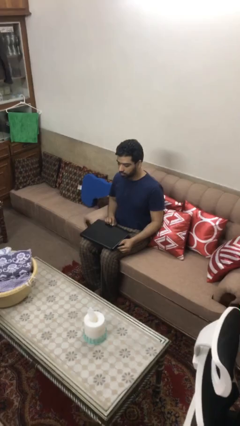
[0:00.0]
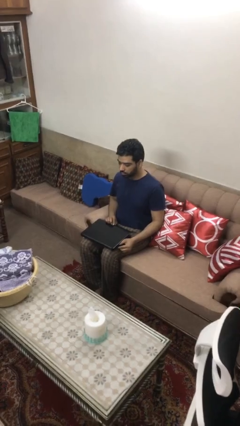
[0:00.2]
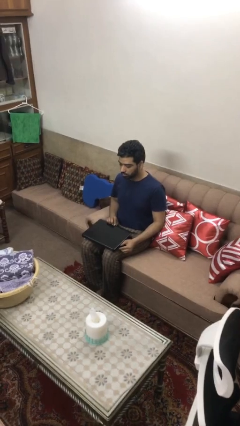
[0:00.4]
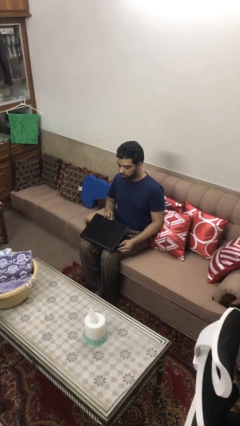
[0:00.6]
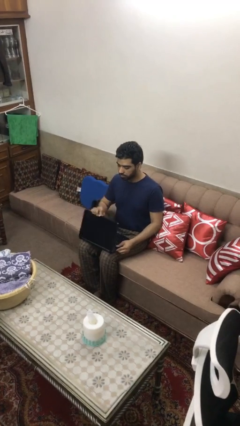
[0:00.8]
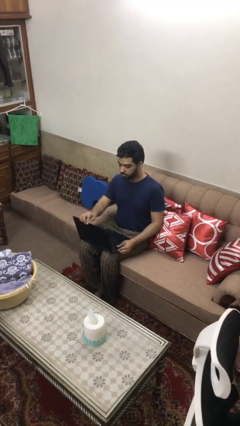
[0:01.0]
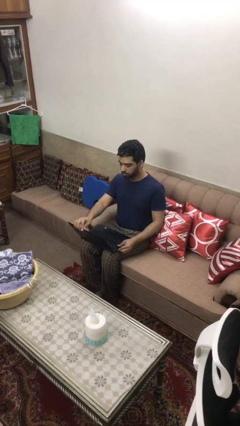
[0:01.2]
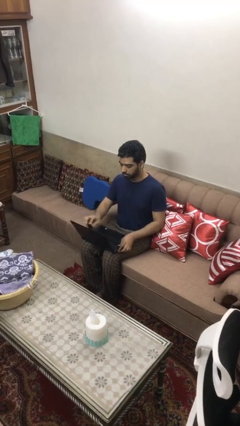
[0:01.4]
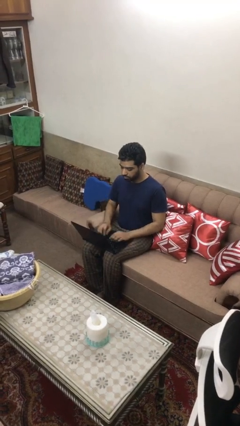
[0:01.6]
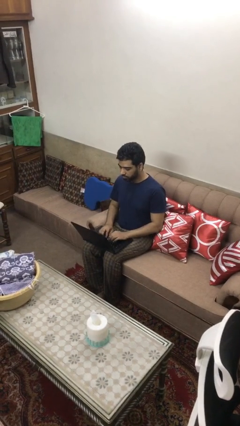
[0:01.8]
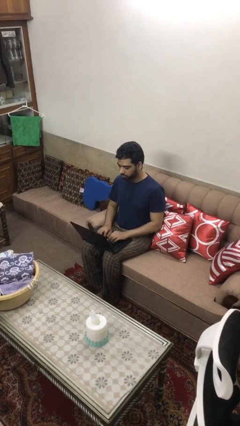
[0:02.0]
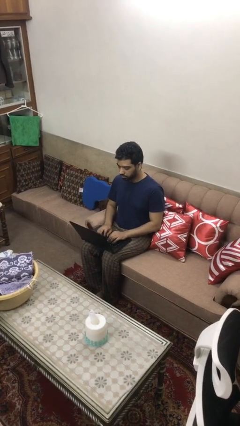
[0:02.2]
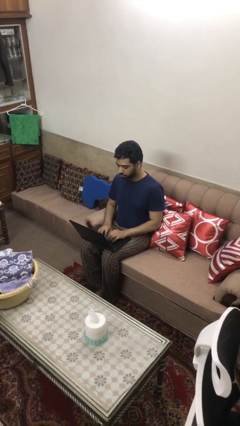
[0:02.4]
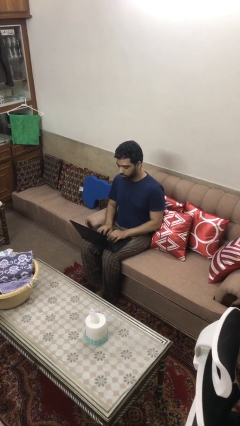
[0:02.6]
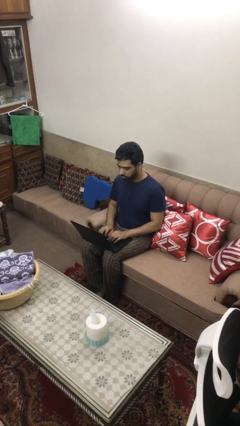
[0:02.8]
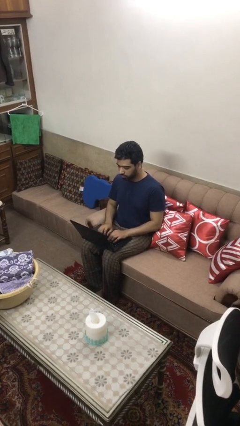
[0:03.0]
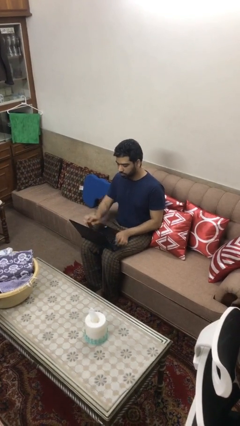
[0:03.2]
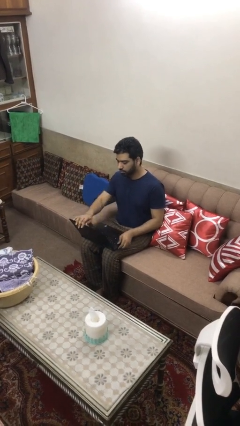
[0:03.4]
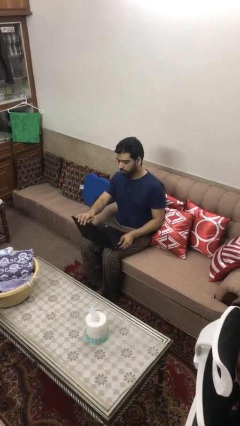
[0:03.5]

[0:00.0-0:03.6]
person interacts with laptop

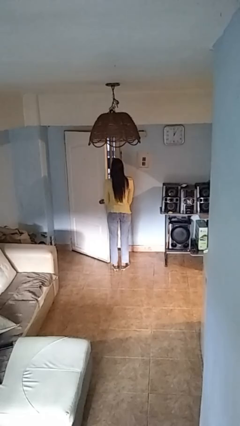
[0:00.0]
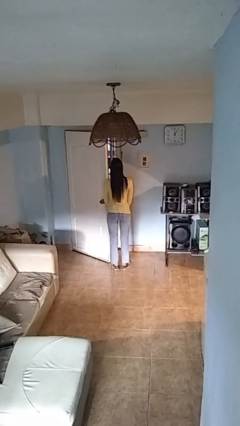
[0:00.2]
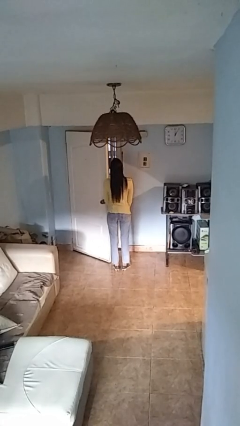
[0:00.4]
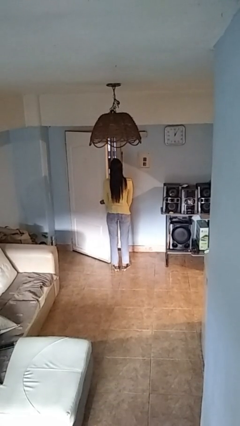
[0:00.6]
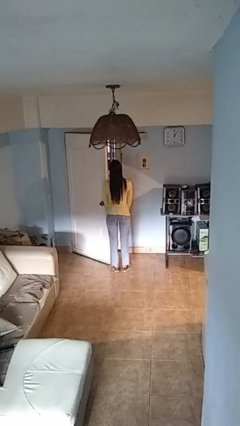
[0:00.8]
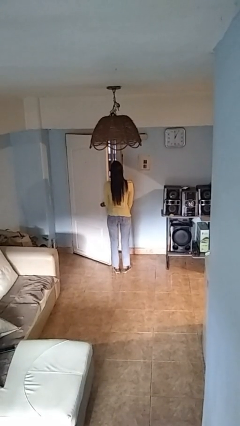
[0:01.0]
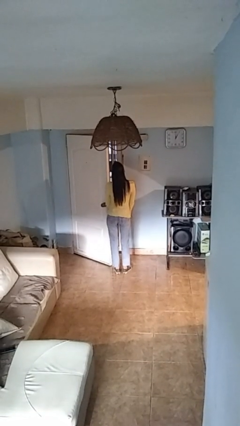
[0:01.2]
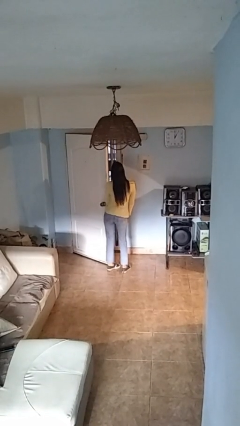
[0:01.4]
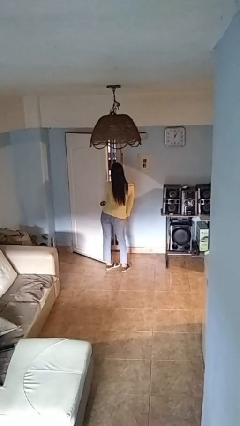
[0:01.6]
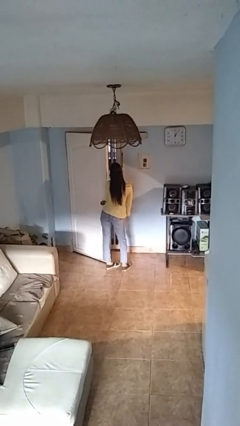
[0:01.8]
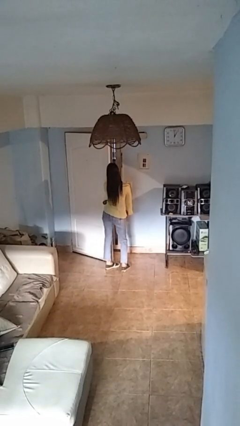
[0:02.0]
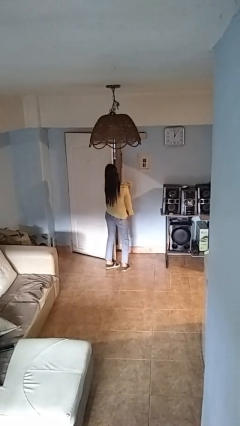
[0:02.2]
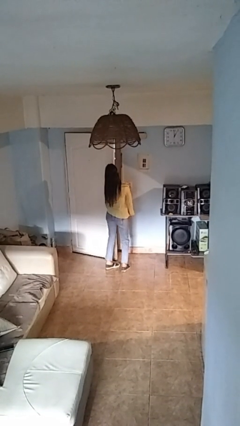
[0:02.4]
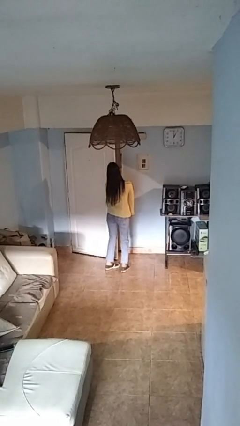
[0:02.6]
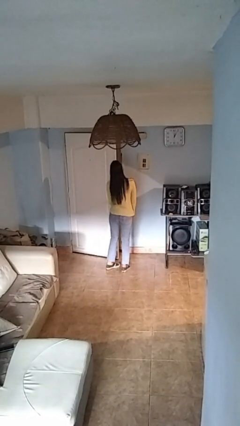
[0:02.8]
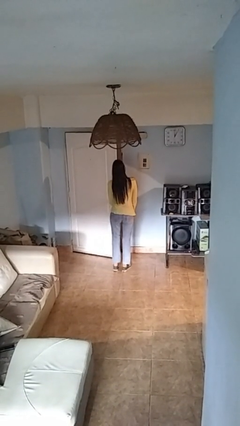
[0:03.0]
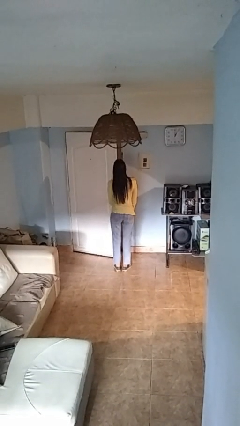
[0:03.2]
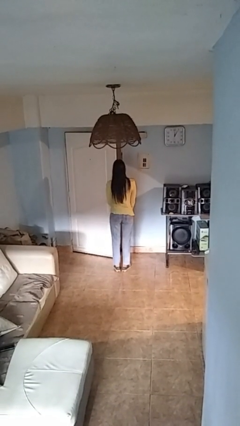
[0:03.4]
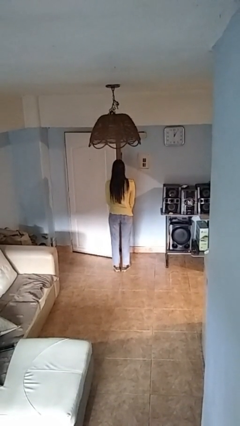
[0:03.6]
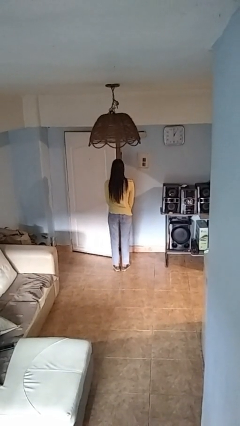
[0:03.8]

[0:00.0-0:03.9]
person closes door with hip

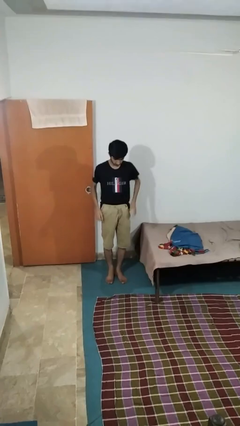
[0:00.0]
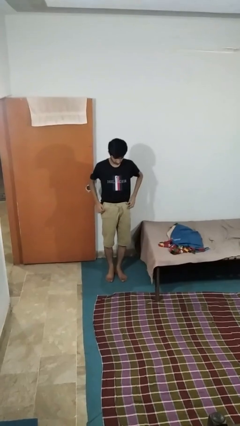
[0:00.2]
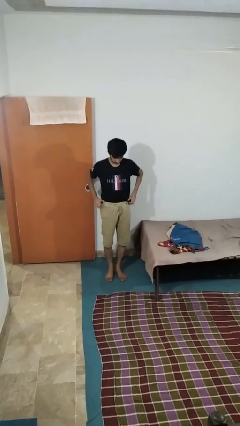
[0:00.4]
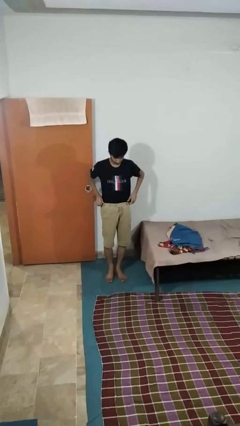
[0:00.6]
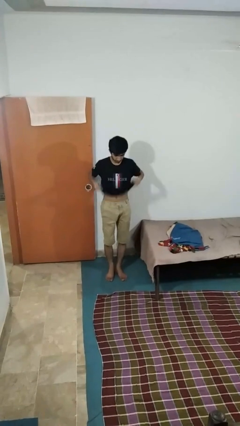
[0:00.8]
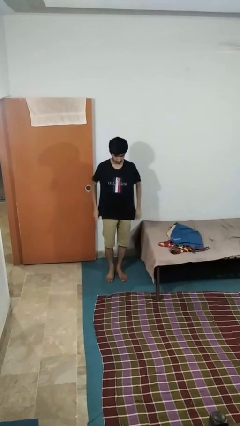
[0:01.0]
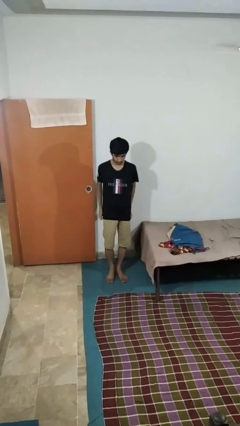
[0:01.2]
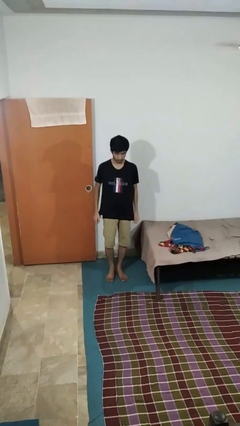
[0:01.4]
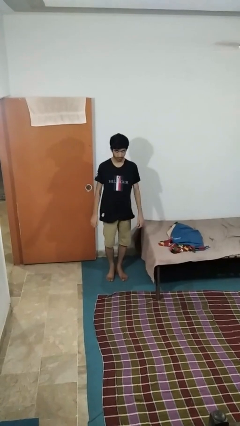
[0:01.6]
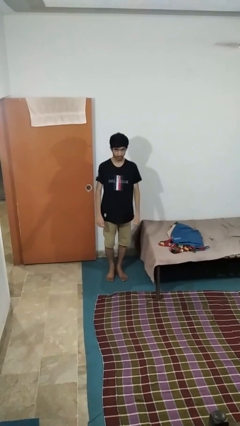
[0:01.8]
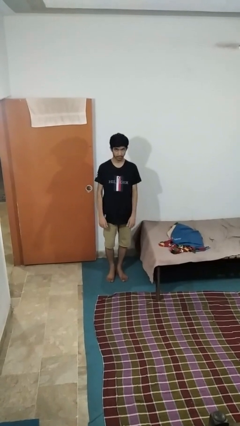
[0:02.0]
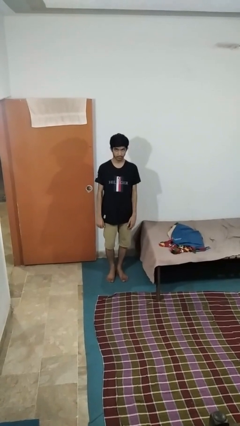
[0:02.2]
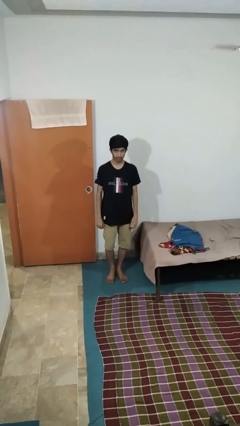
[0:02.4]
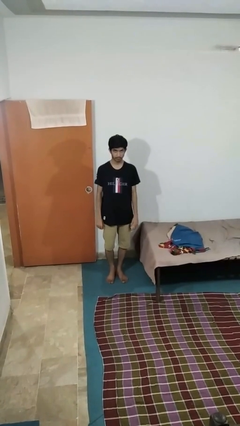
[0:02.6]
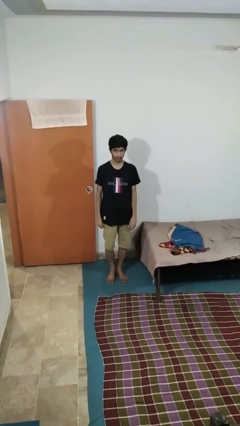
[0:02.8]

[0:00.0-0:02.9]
person untucks shirt

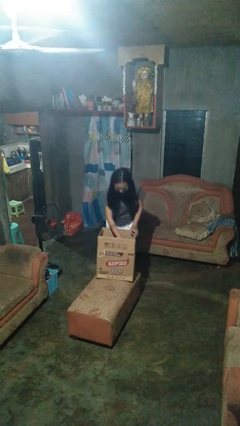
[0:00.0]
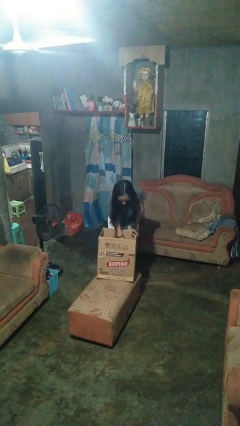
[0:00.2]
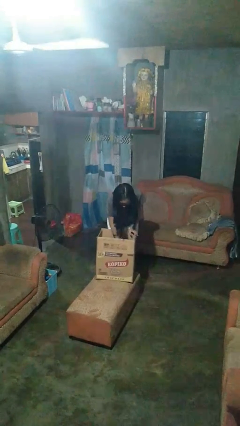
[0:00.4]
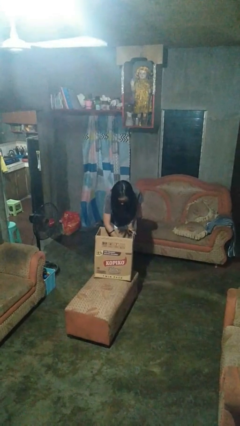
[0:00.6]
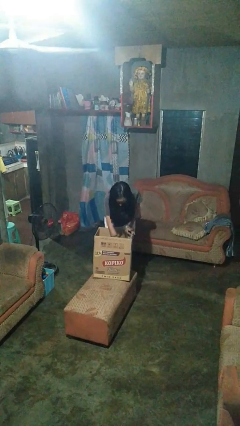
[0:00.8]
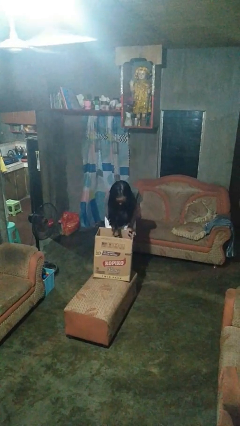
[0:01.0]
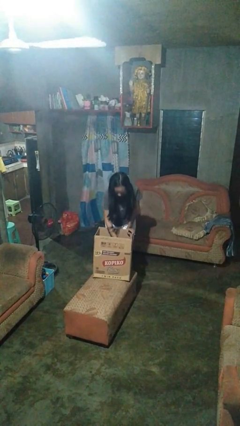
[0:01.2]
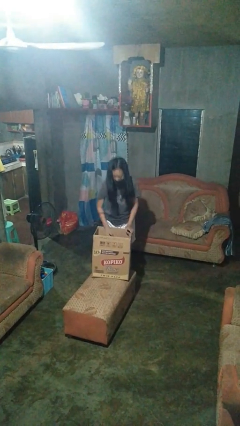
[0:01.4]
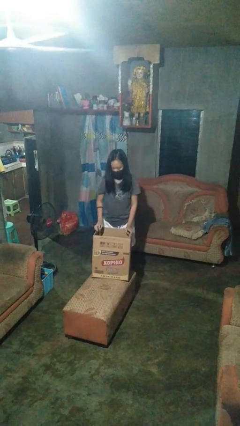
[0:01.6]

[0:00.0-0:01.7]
person searches in box

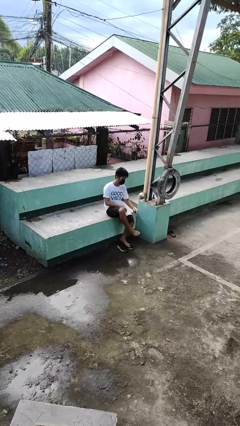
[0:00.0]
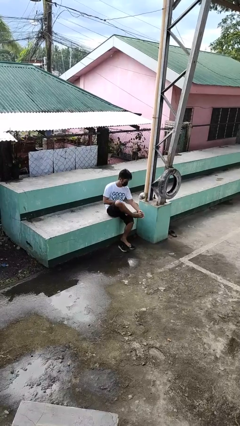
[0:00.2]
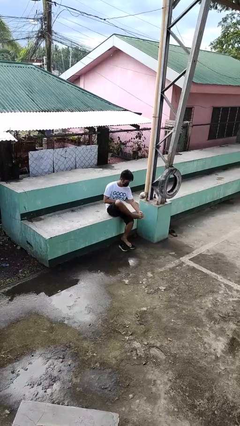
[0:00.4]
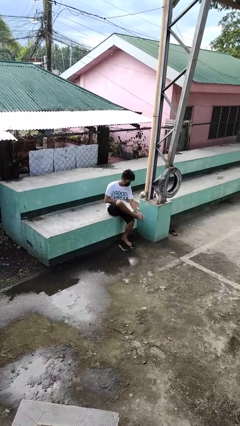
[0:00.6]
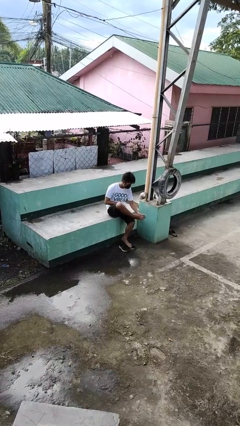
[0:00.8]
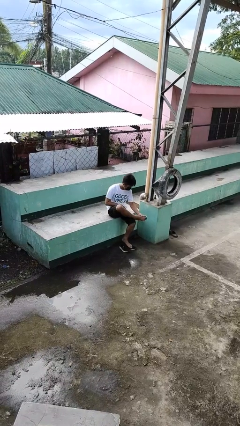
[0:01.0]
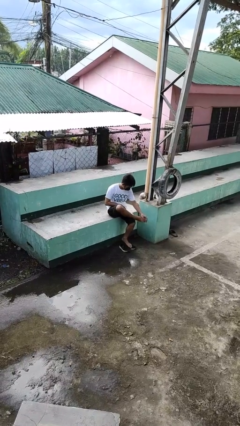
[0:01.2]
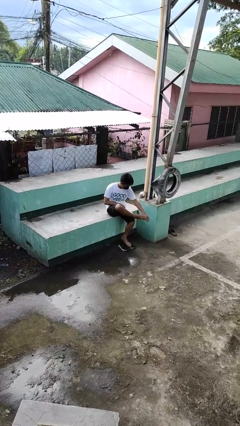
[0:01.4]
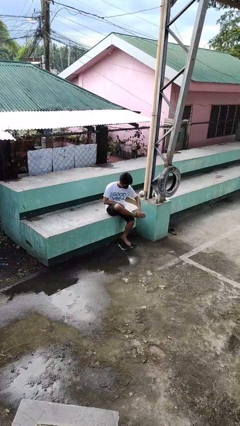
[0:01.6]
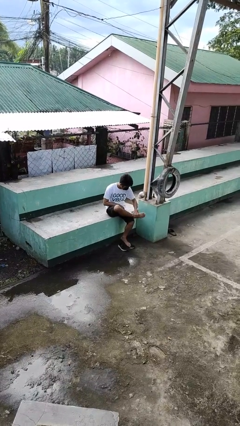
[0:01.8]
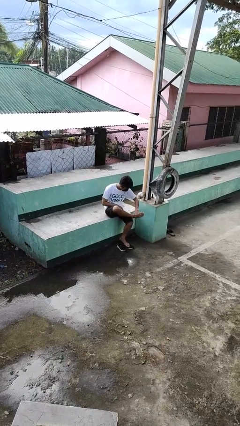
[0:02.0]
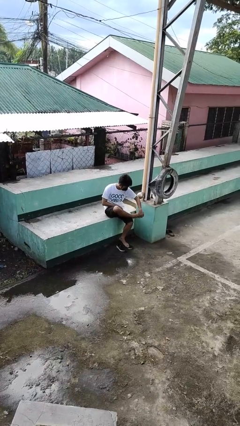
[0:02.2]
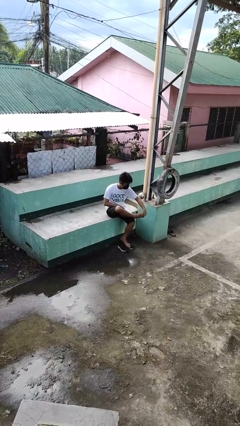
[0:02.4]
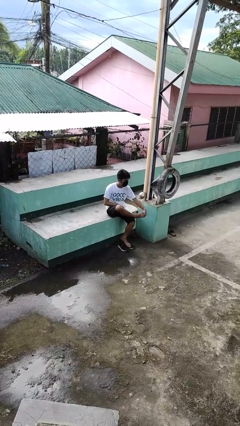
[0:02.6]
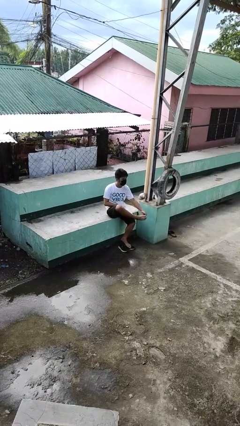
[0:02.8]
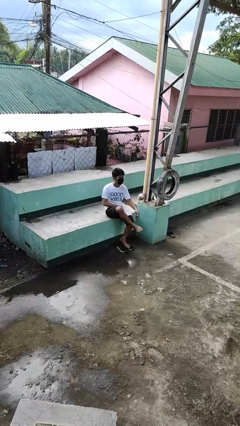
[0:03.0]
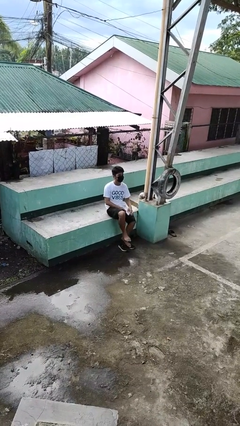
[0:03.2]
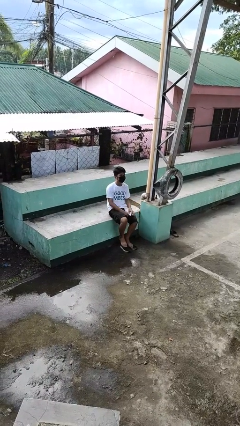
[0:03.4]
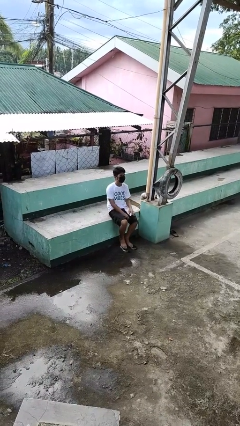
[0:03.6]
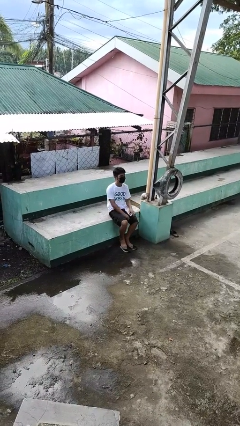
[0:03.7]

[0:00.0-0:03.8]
person rubs foot

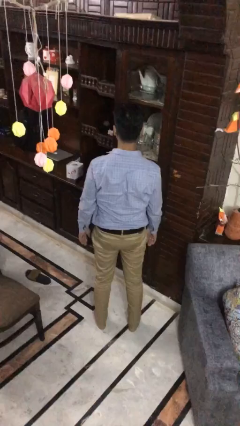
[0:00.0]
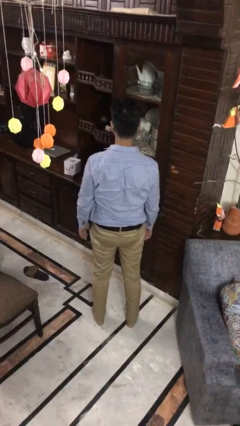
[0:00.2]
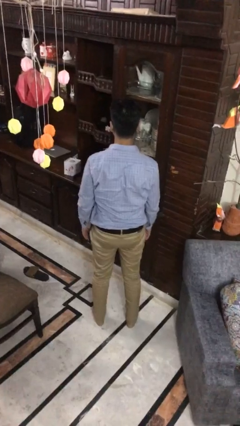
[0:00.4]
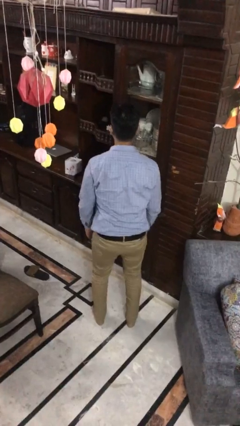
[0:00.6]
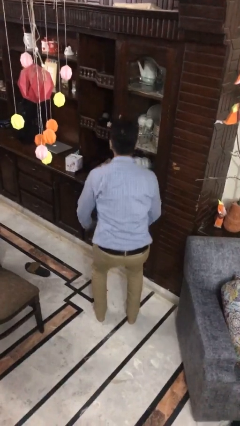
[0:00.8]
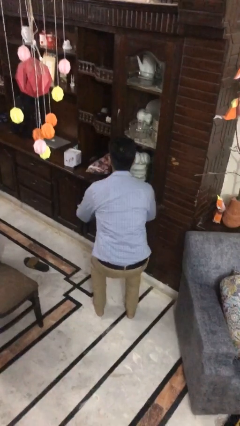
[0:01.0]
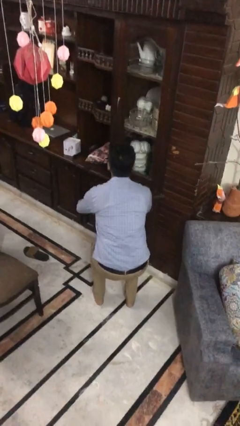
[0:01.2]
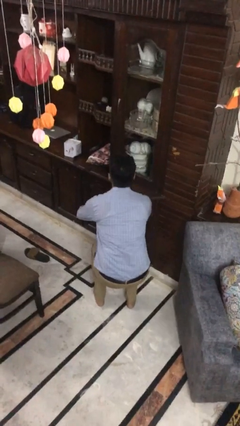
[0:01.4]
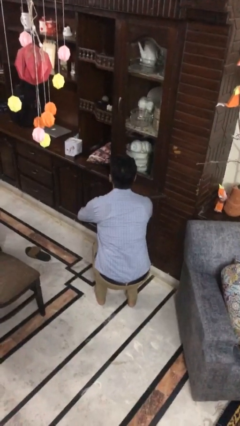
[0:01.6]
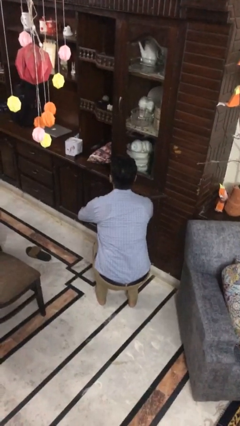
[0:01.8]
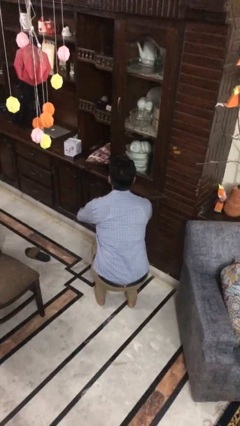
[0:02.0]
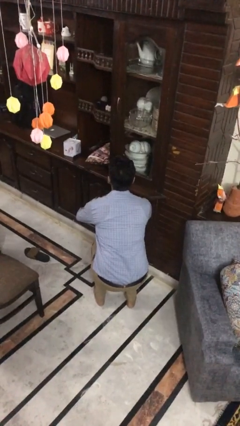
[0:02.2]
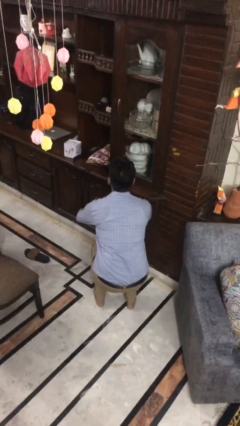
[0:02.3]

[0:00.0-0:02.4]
person squats
